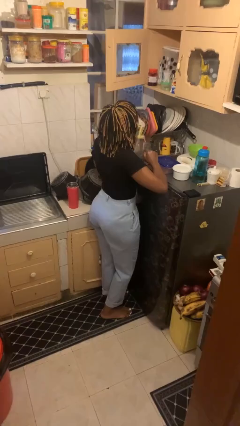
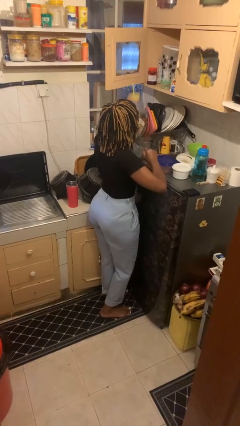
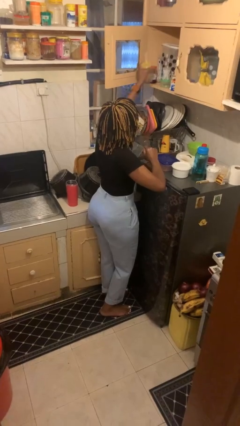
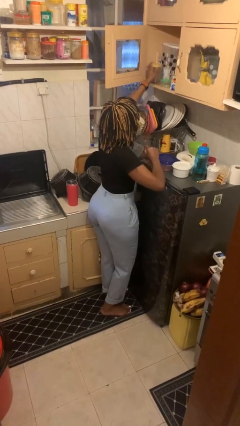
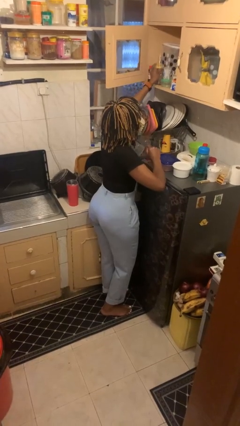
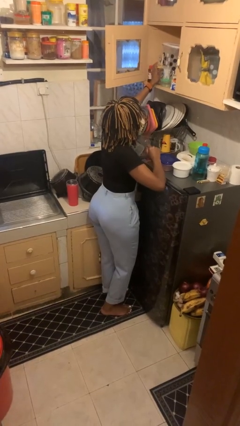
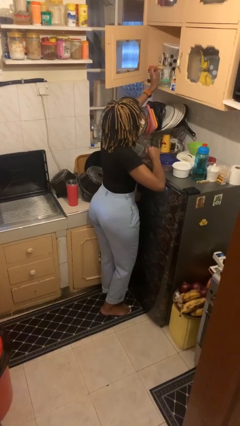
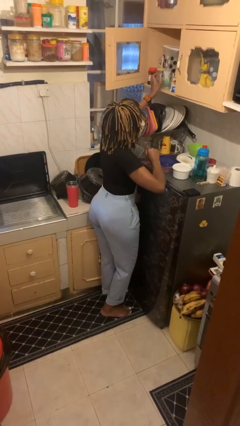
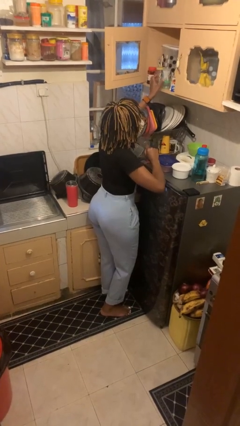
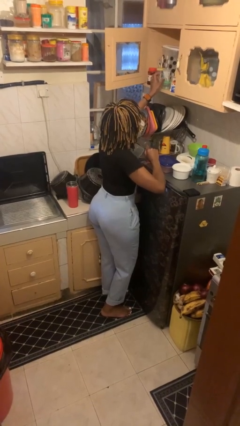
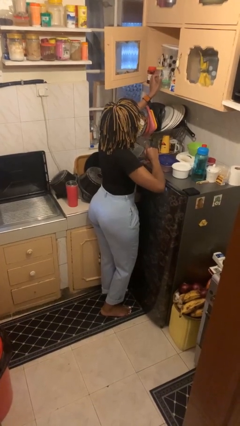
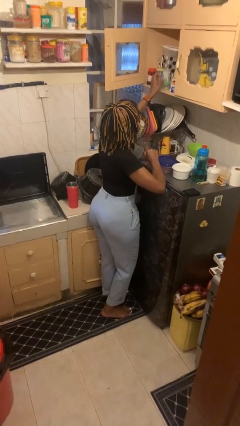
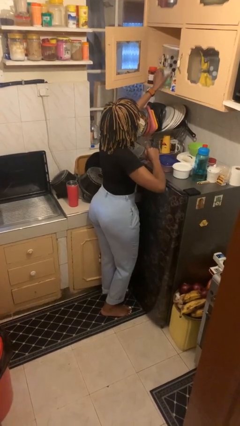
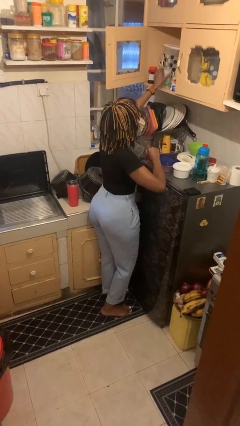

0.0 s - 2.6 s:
person puts object in cabinet

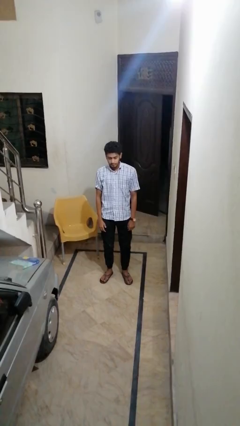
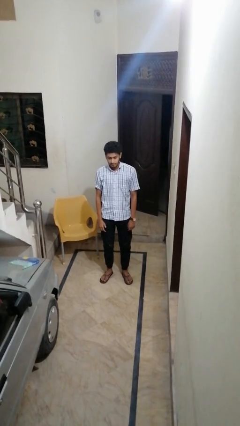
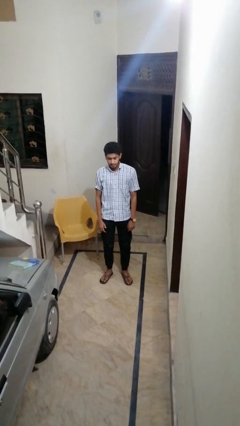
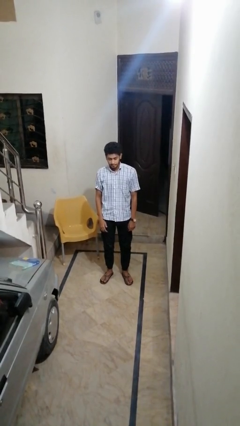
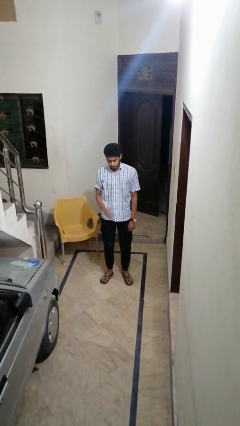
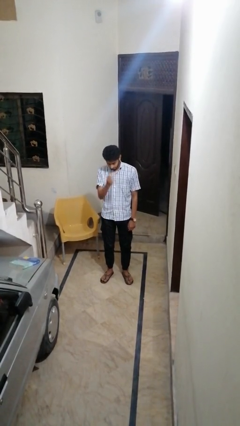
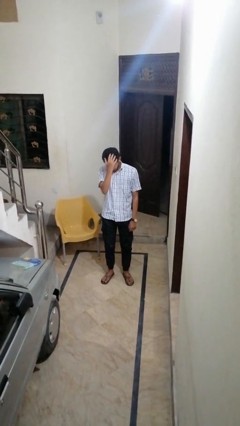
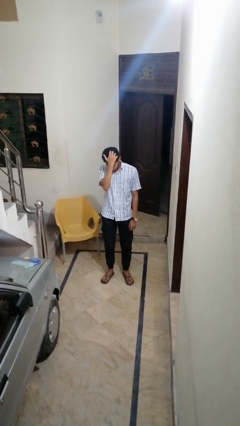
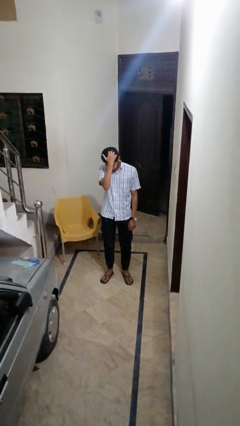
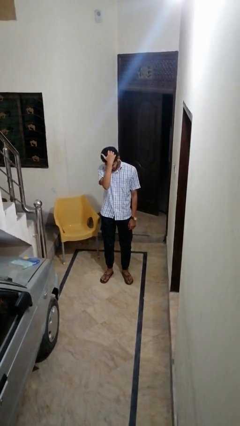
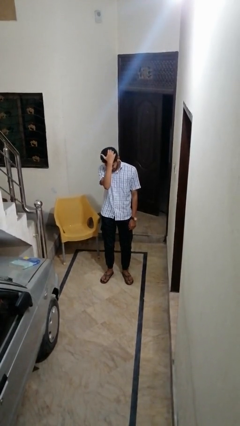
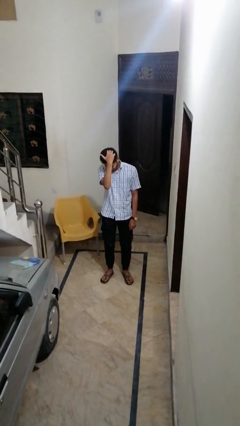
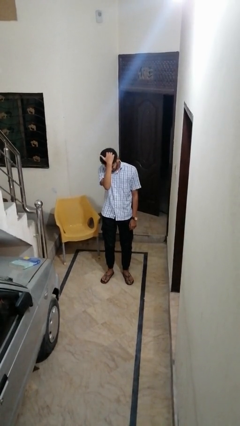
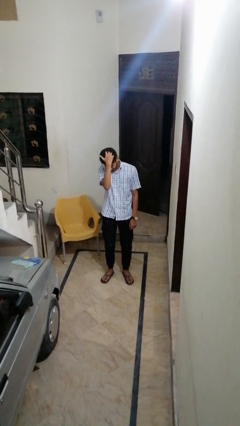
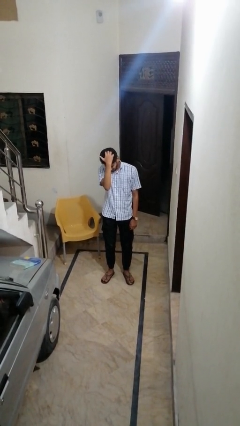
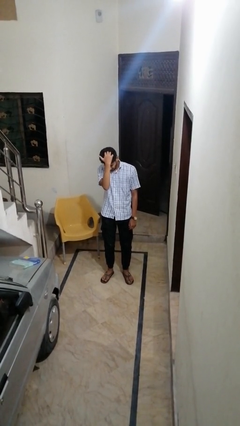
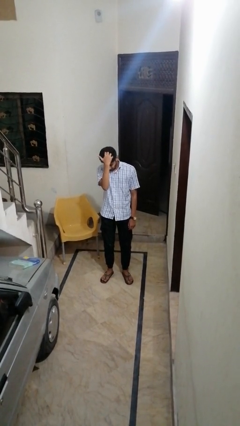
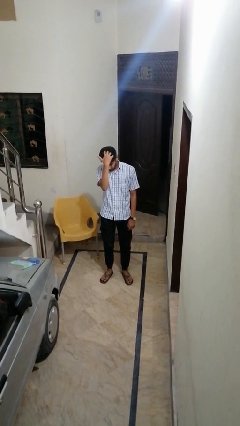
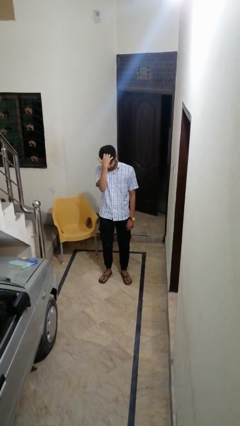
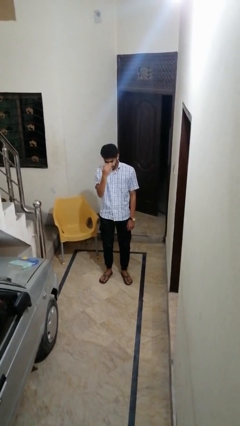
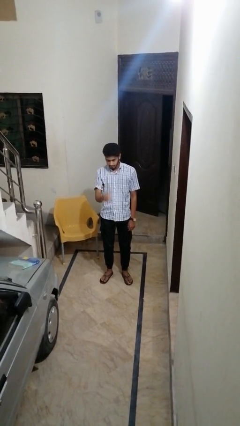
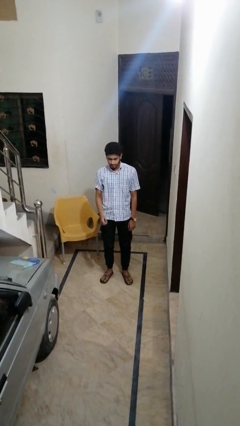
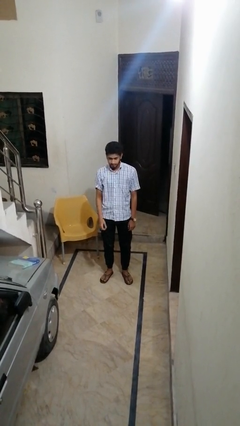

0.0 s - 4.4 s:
person scratches face

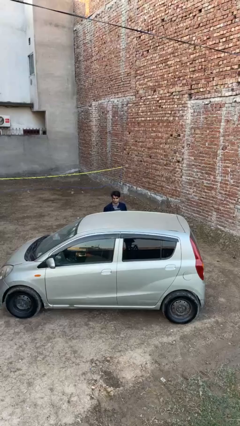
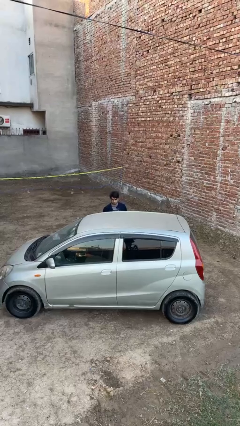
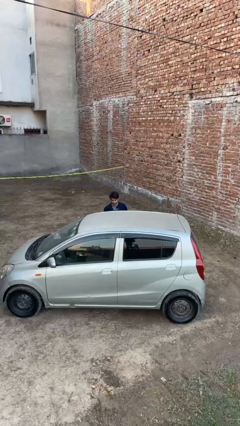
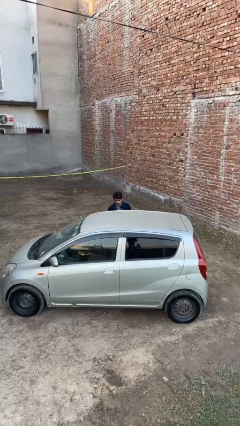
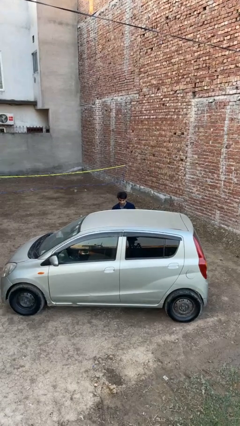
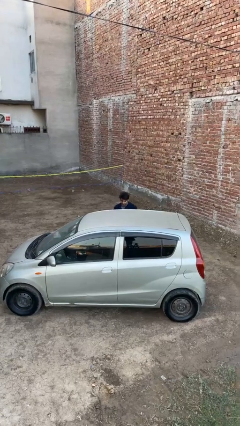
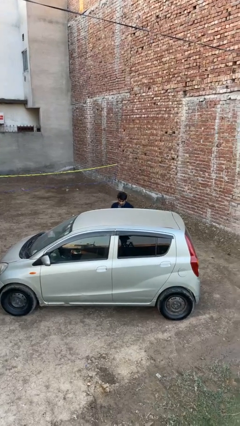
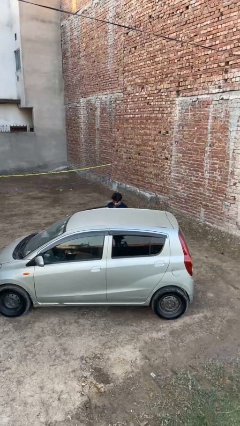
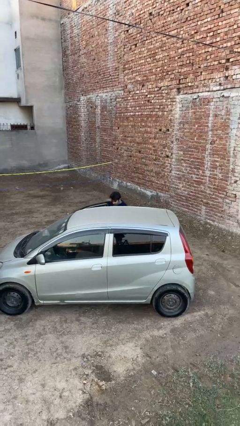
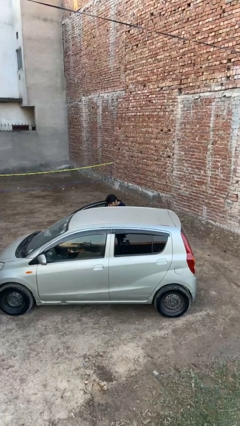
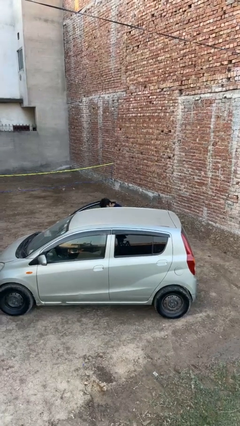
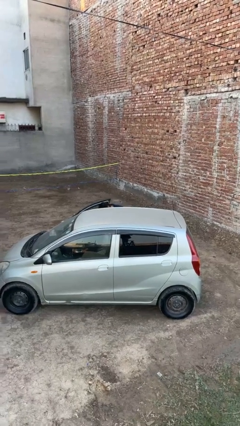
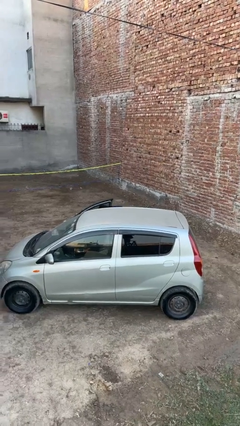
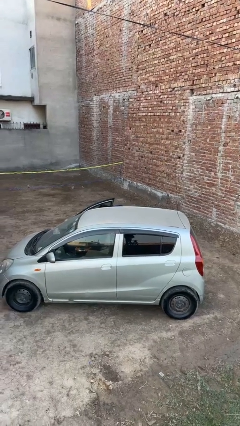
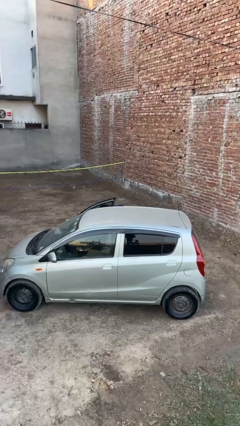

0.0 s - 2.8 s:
person opens car door

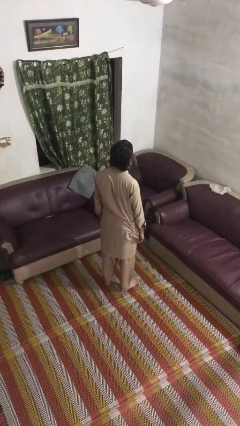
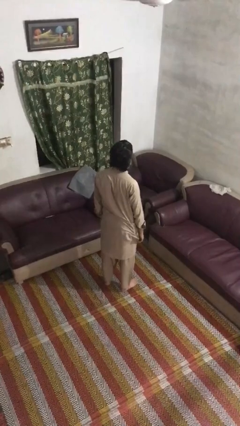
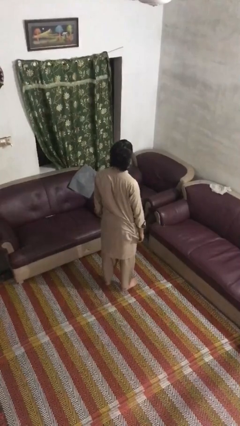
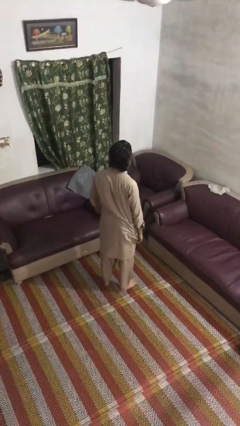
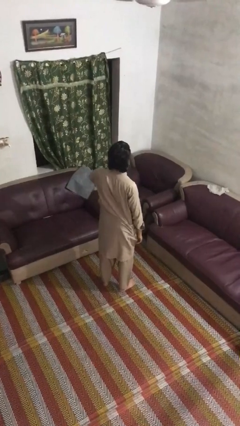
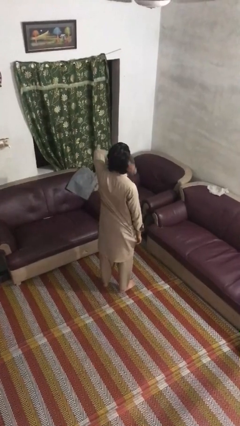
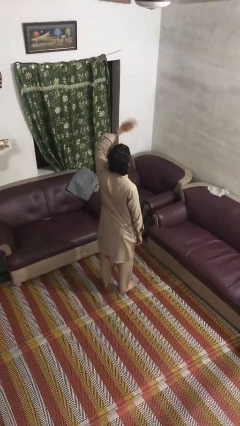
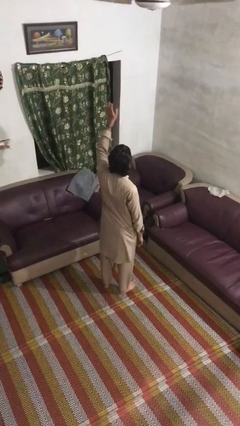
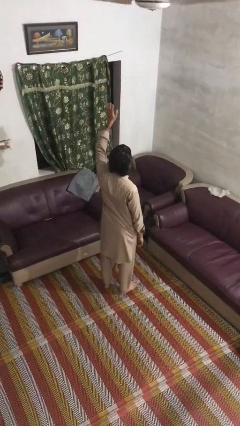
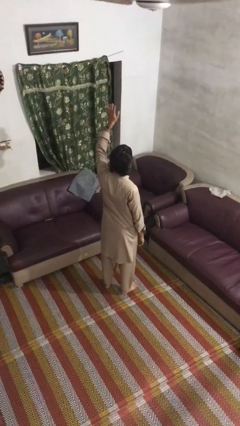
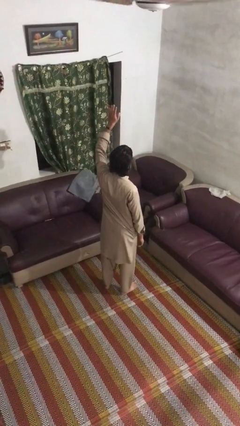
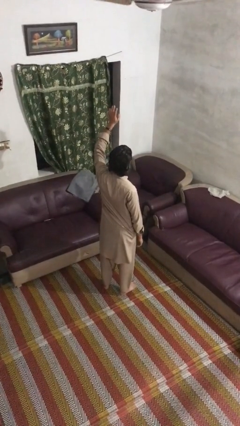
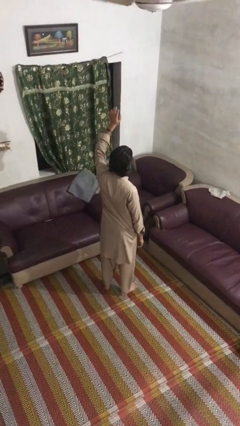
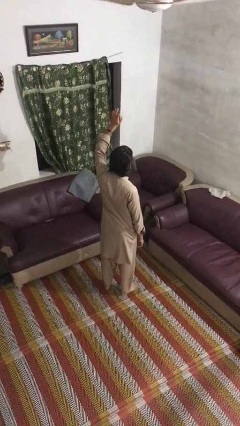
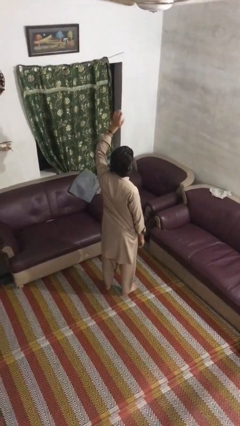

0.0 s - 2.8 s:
person gestures swipe up

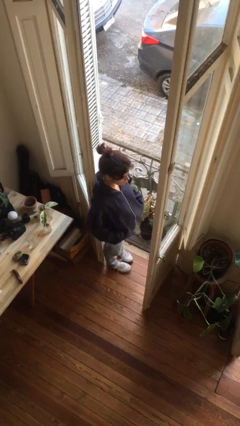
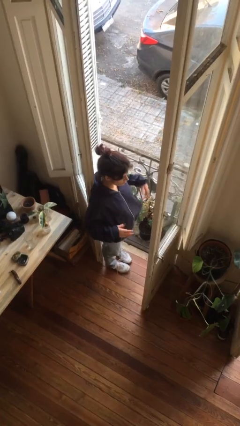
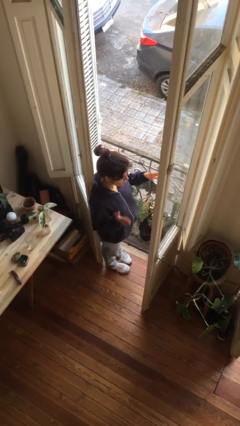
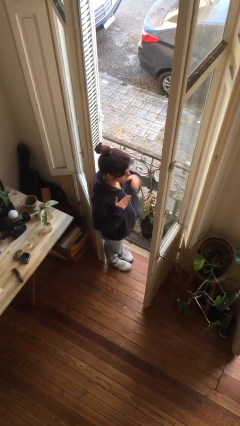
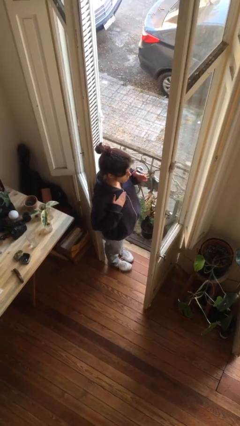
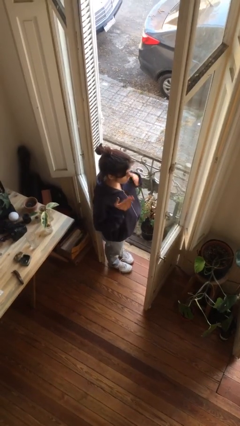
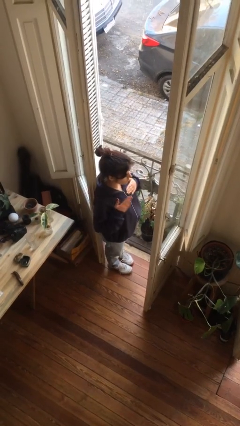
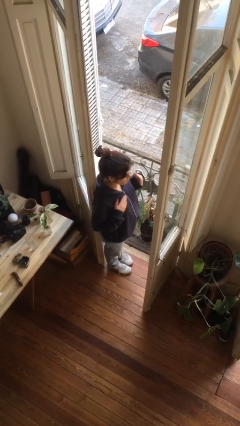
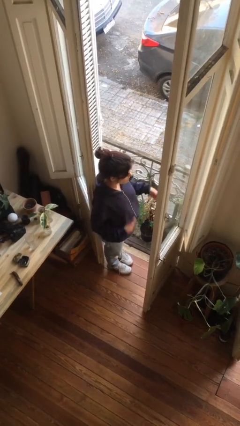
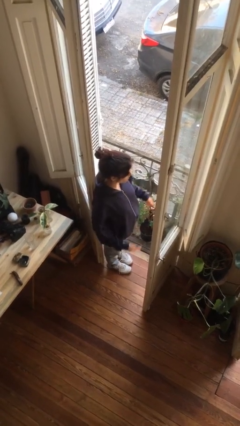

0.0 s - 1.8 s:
person drums on chest

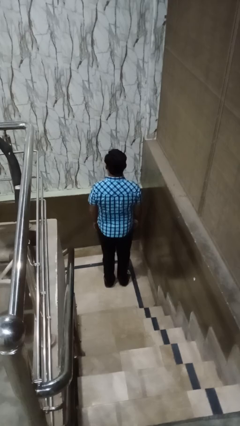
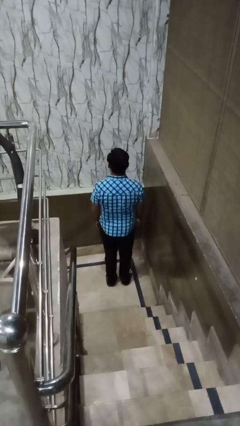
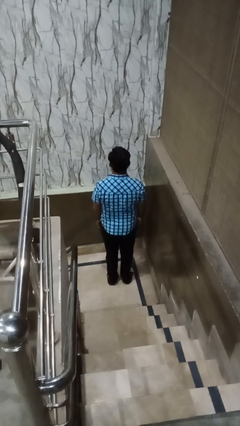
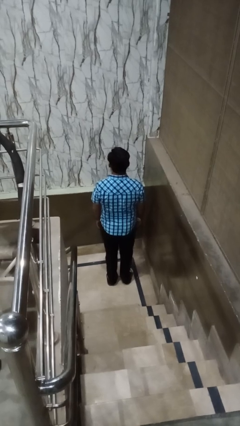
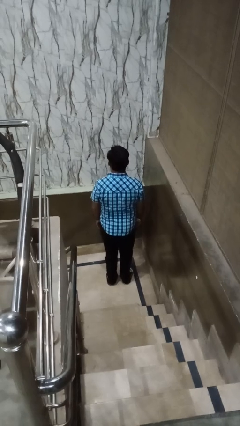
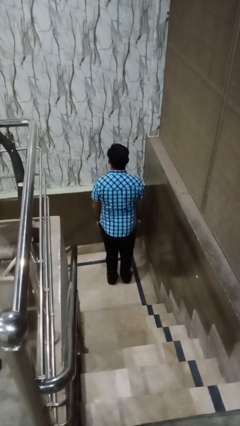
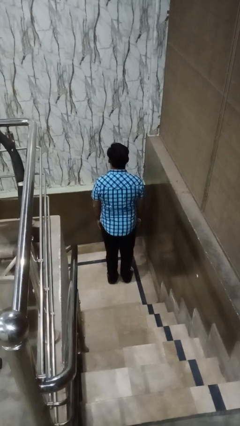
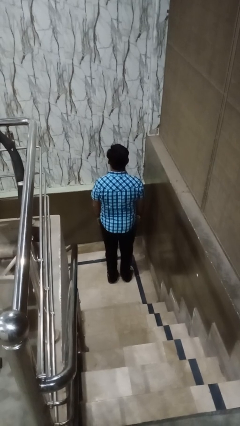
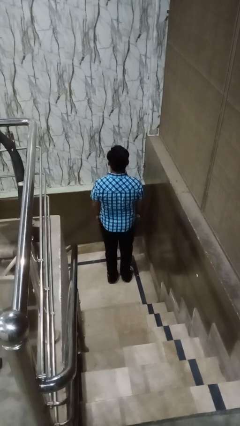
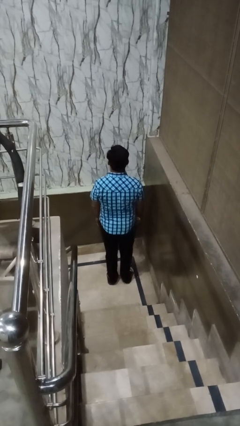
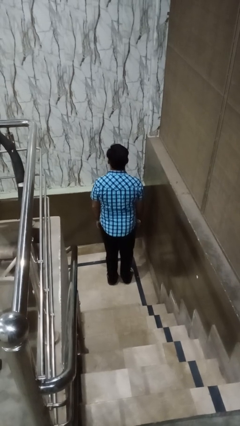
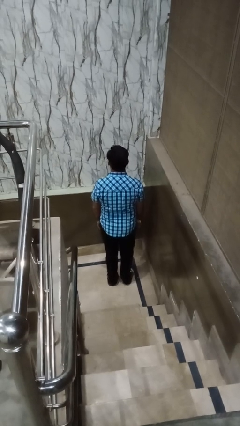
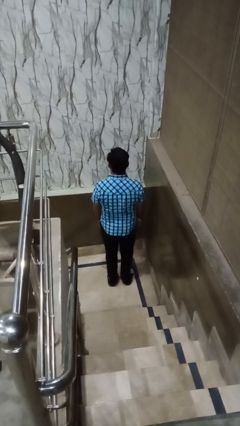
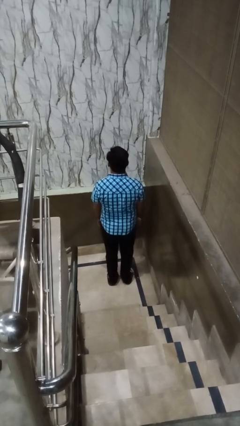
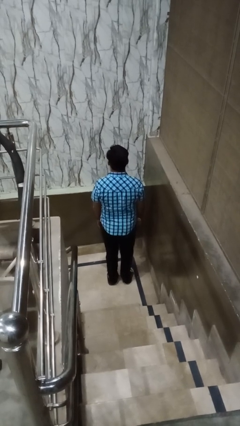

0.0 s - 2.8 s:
person wiggles hips
